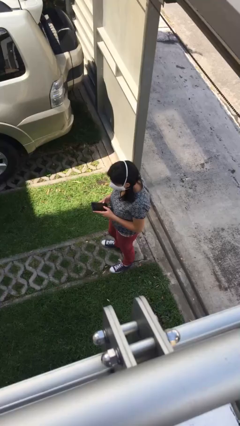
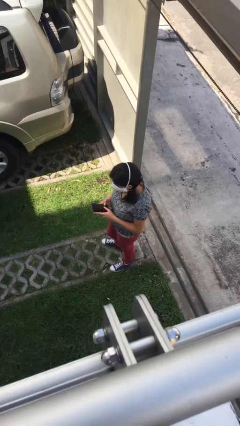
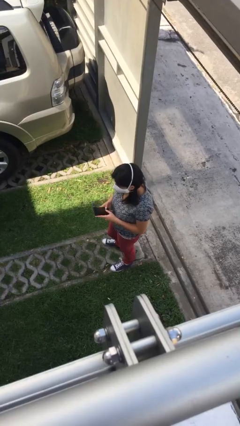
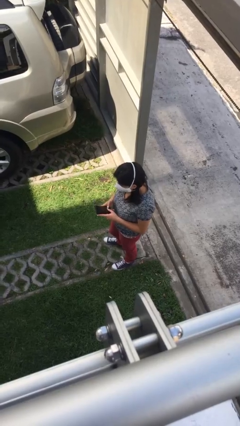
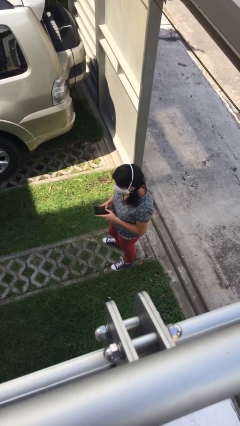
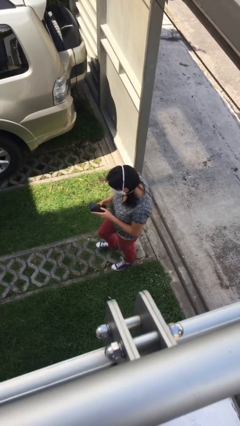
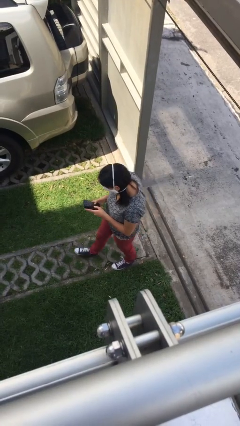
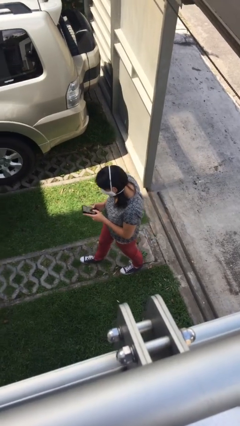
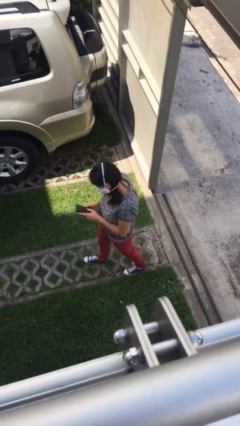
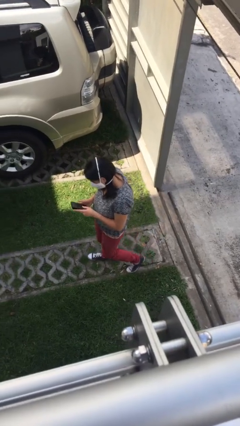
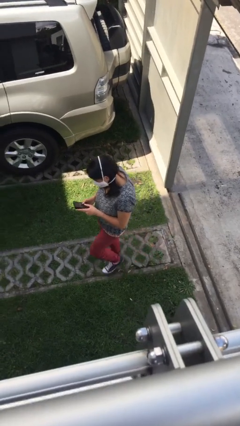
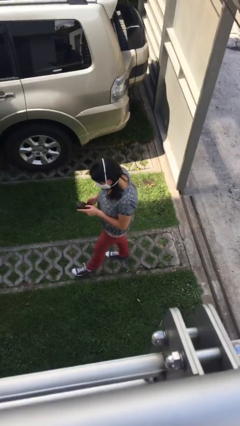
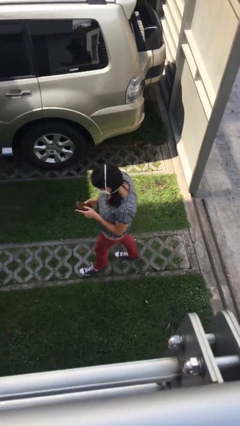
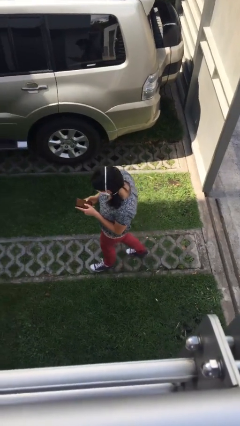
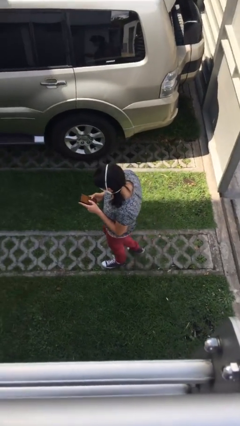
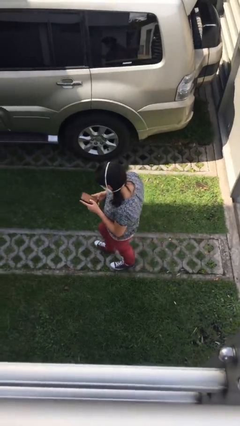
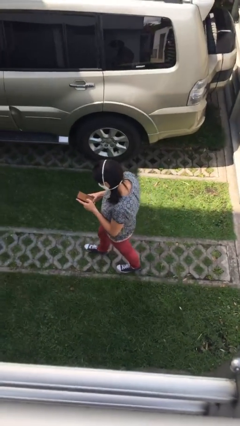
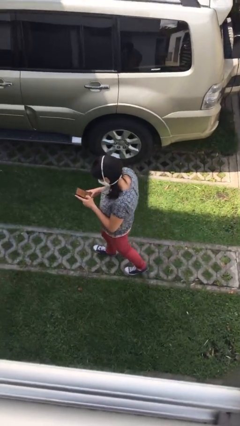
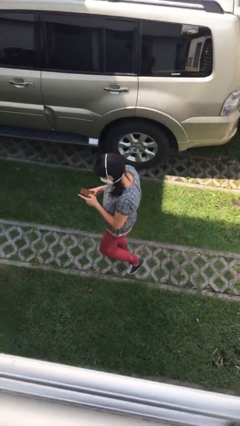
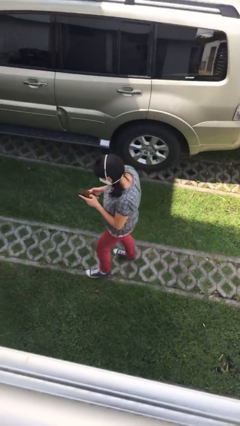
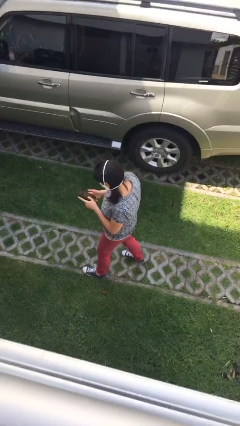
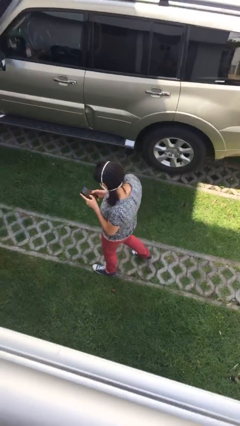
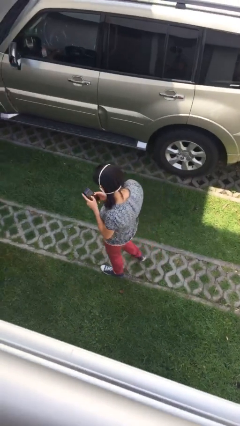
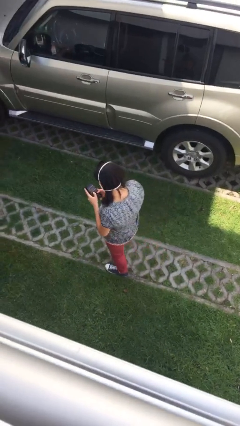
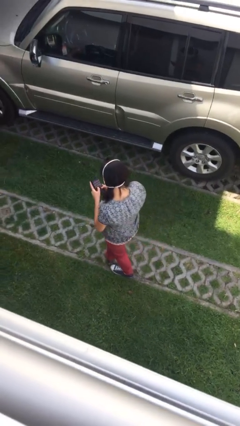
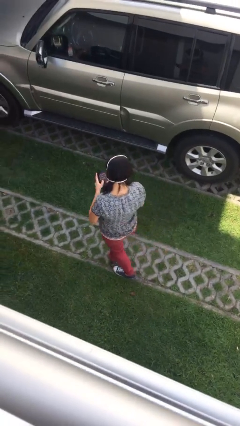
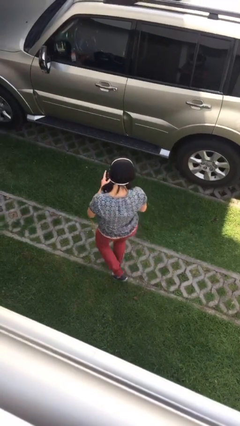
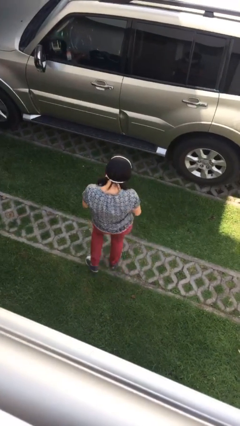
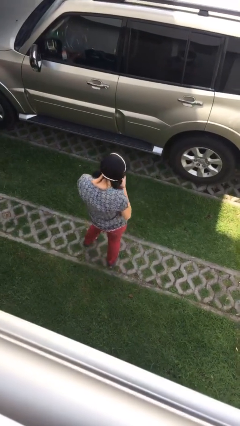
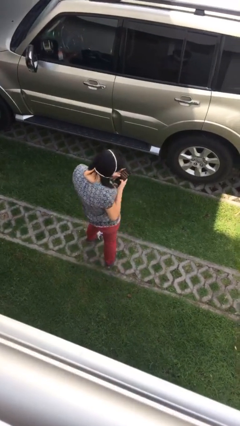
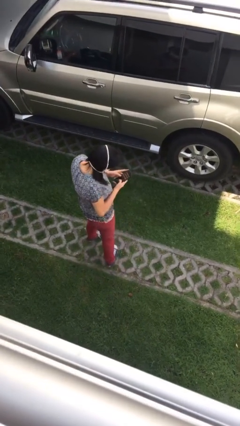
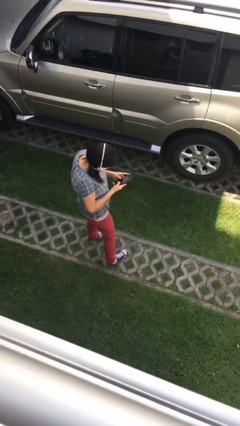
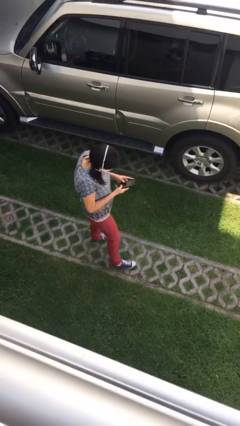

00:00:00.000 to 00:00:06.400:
person texts on phone

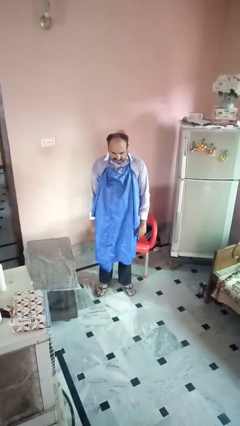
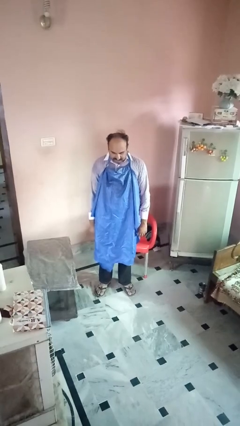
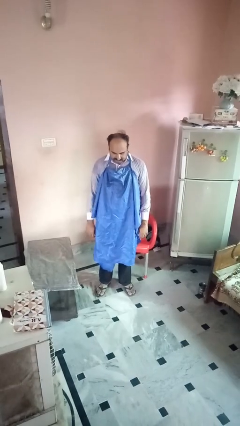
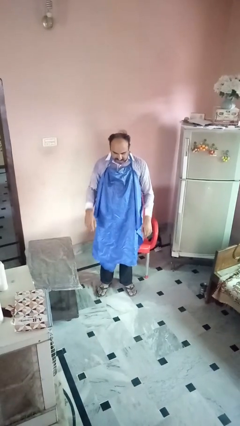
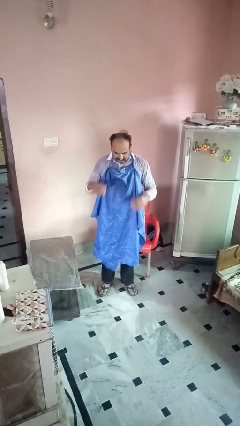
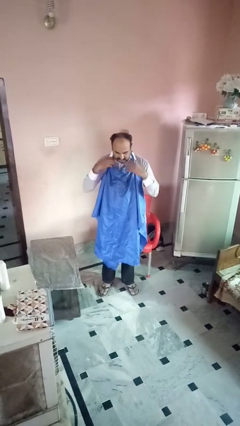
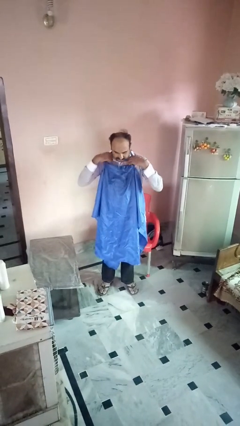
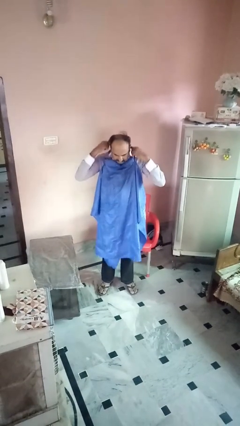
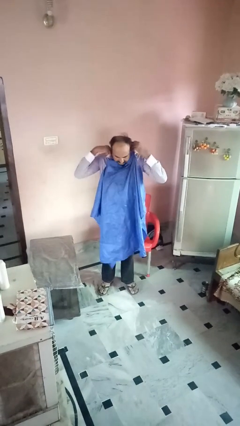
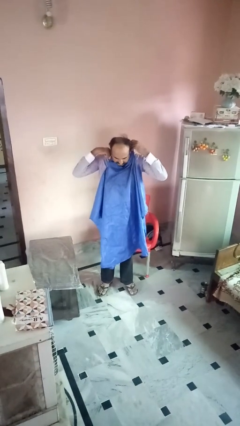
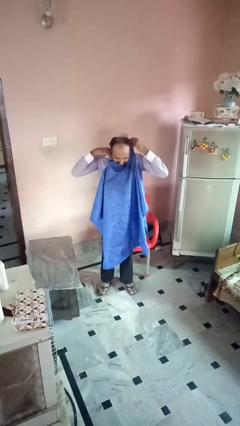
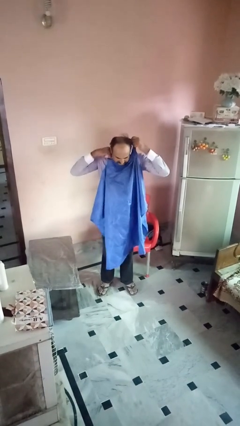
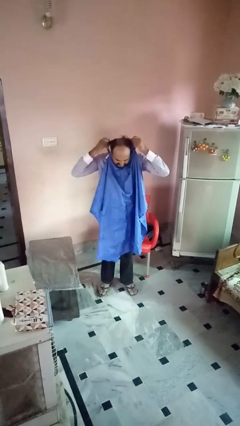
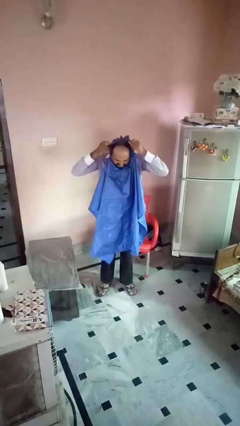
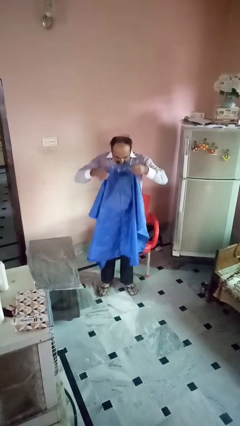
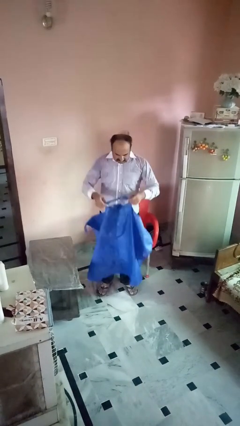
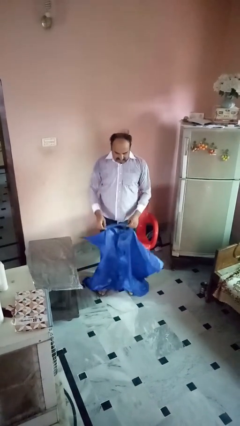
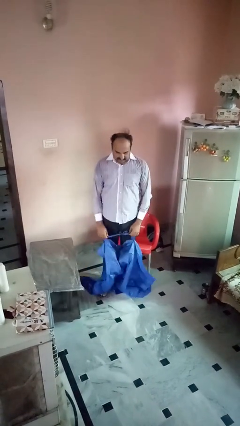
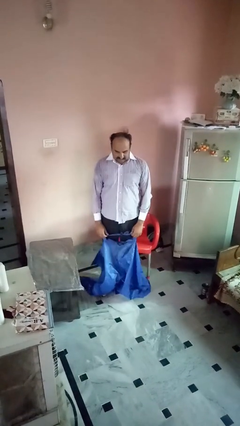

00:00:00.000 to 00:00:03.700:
person takes off apron

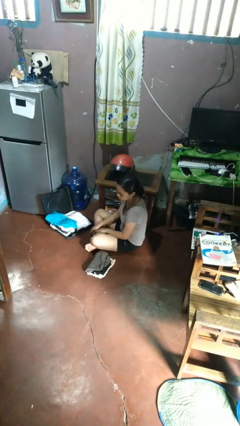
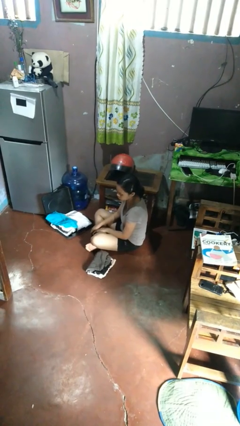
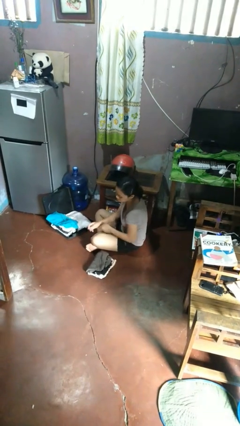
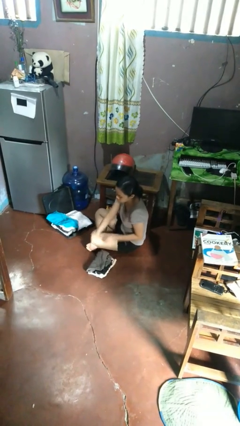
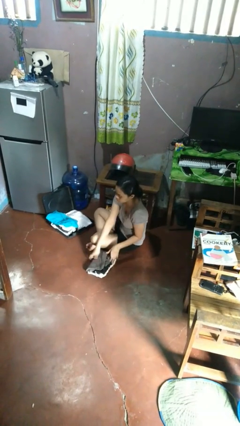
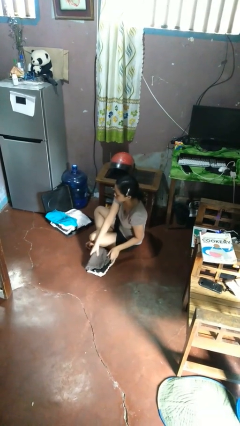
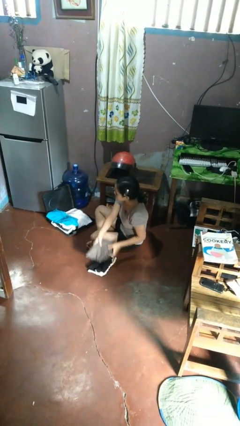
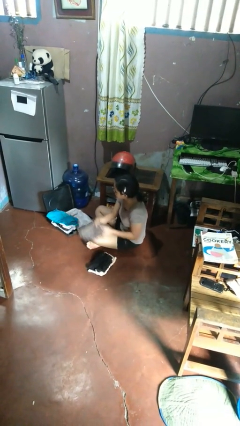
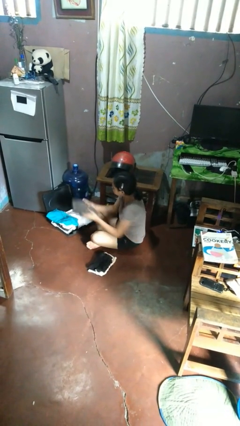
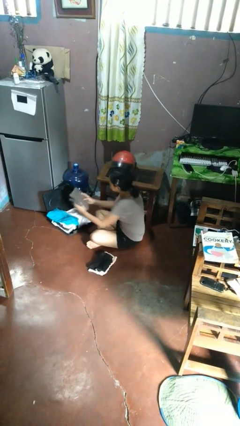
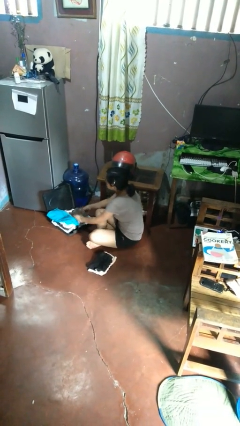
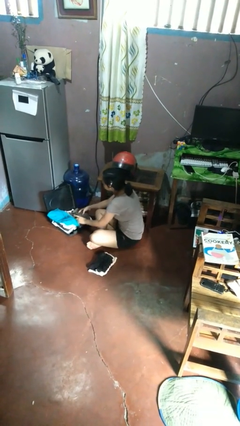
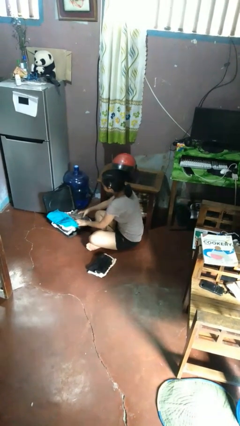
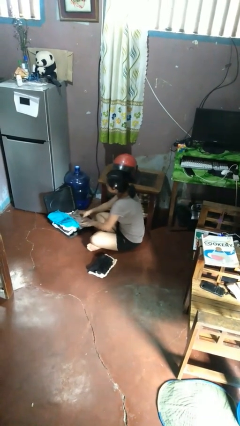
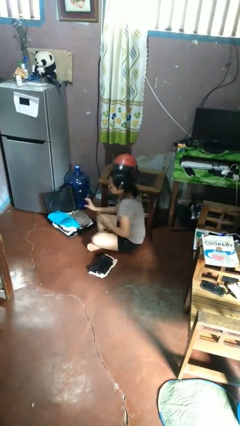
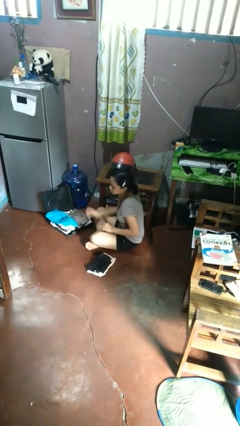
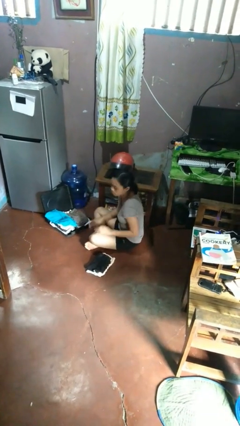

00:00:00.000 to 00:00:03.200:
person loads clothes into suitcase

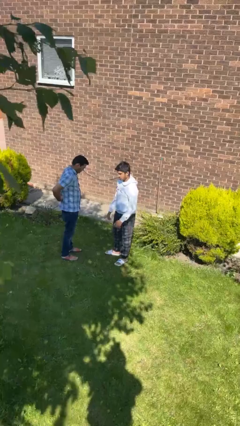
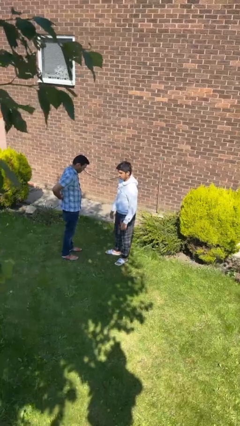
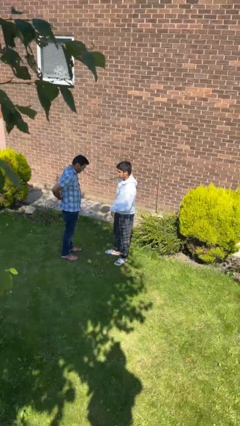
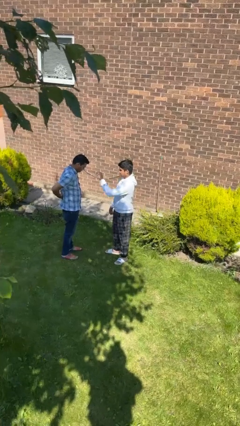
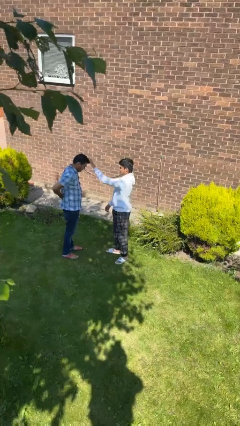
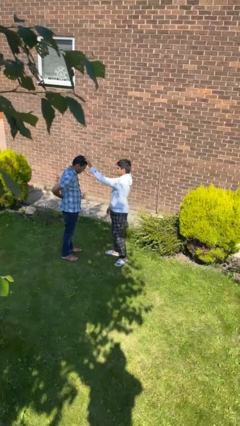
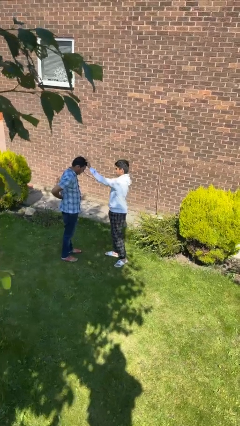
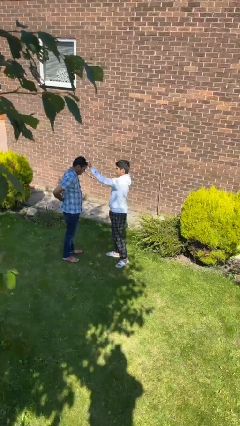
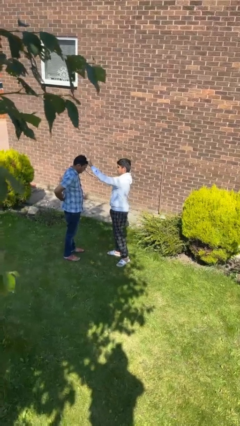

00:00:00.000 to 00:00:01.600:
person grabs person by hair

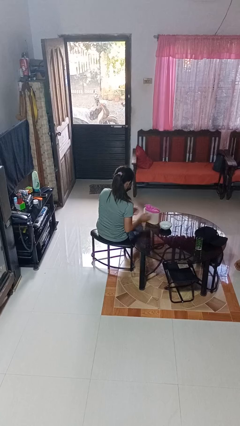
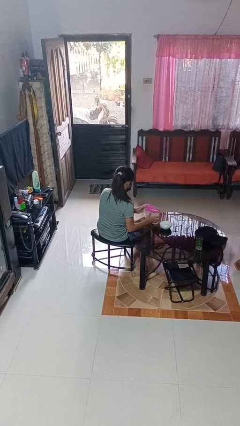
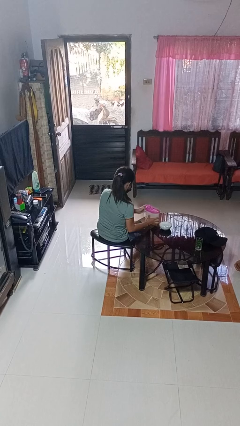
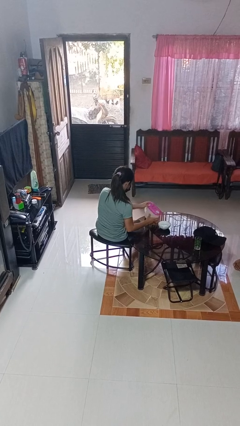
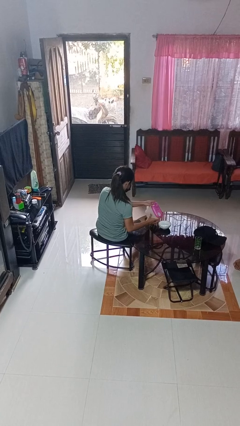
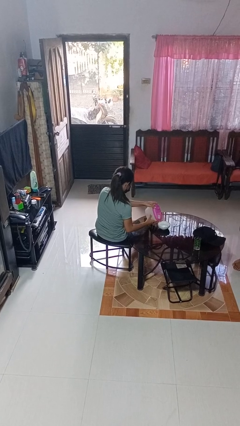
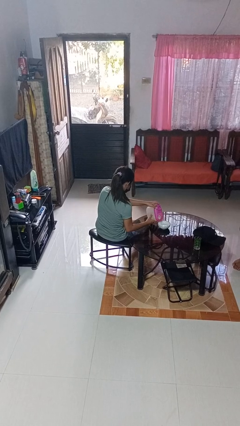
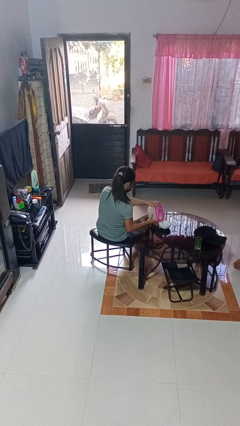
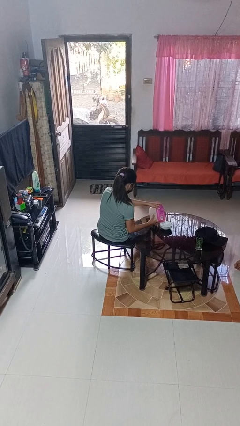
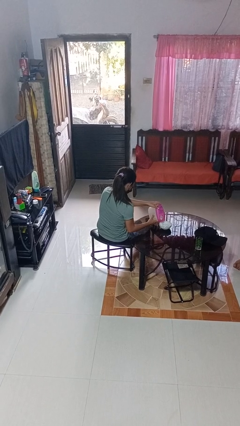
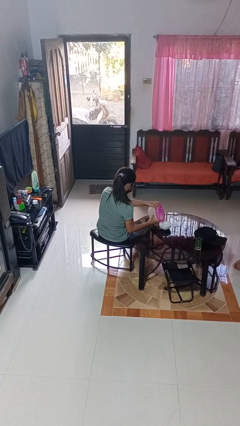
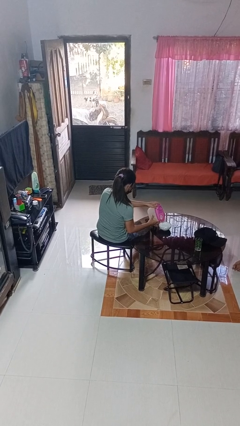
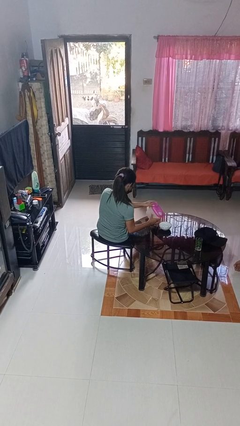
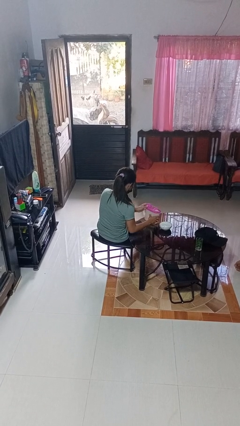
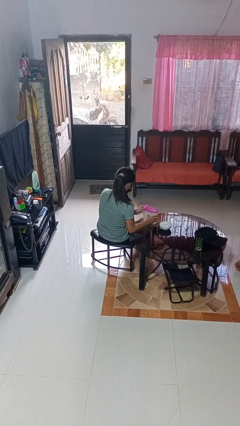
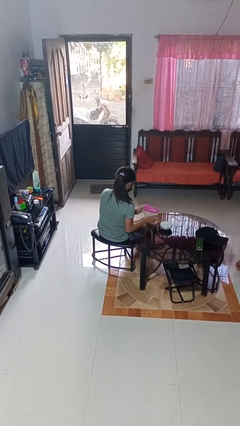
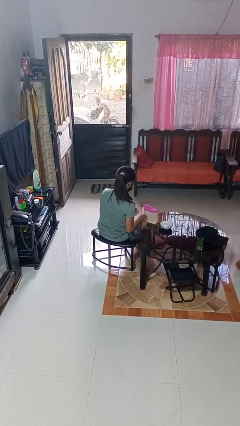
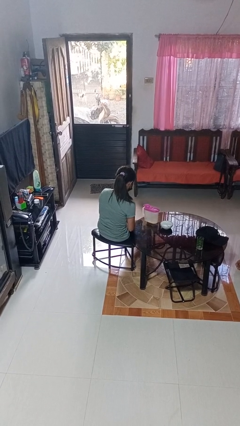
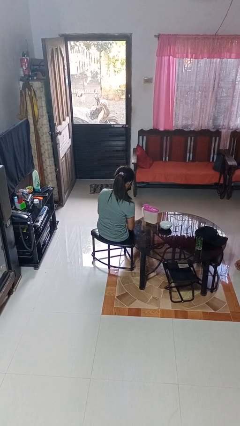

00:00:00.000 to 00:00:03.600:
person pours into bowl
